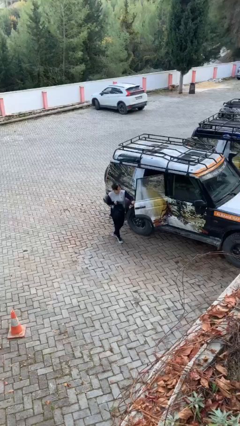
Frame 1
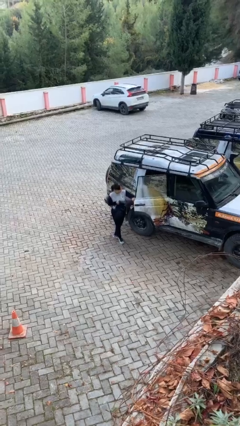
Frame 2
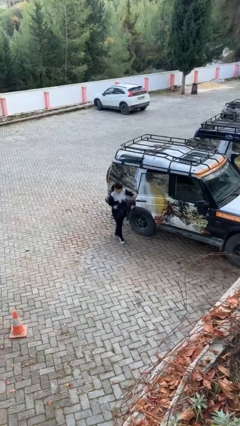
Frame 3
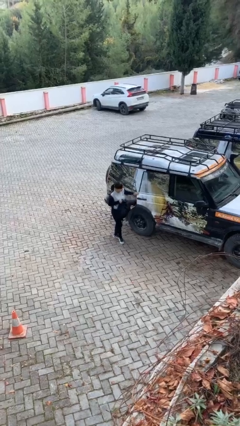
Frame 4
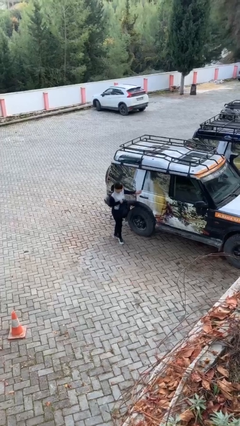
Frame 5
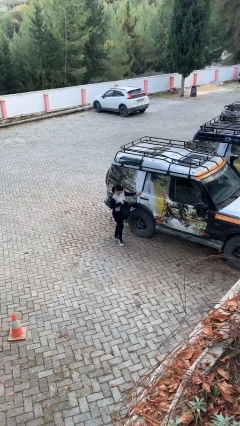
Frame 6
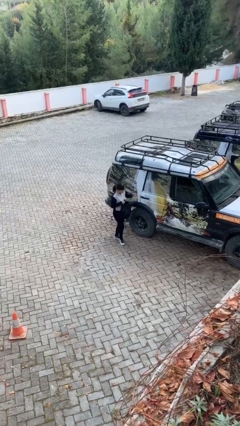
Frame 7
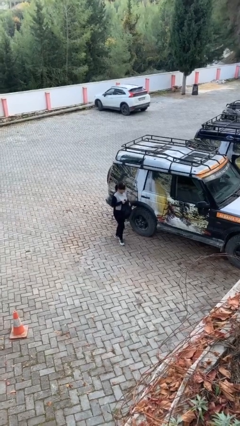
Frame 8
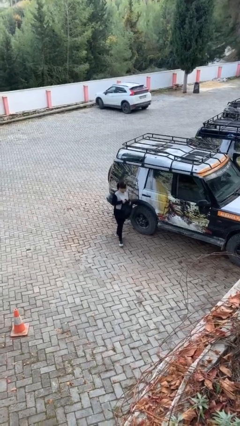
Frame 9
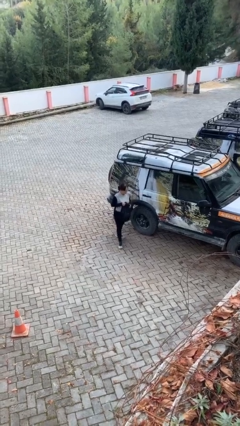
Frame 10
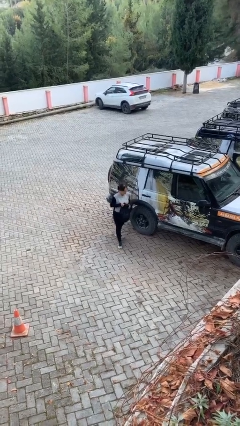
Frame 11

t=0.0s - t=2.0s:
person closes car door

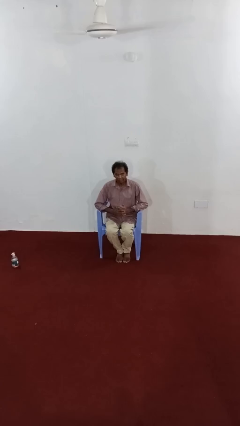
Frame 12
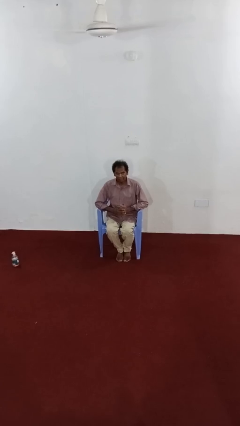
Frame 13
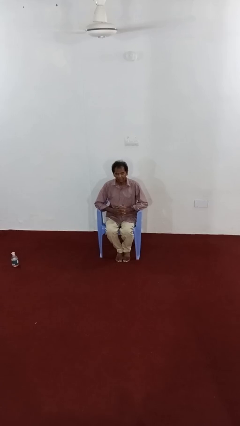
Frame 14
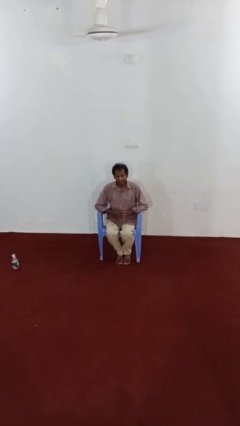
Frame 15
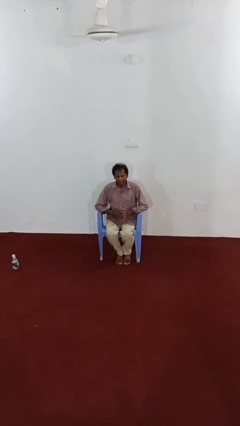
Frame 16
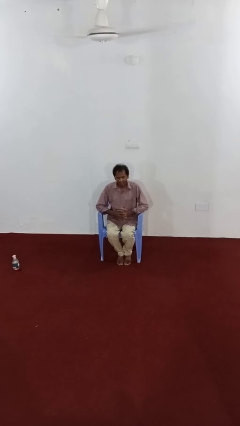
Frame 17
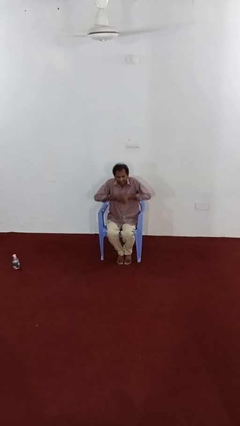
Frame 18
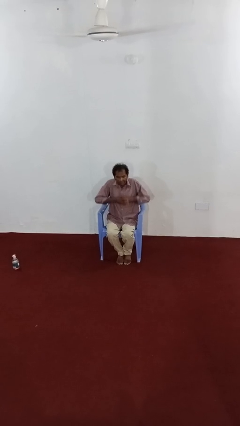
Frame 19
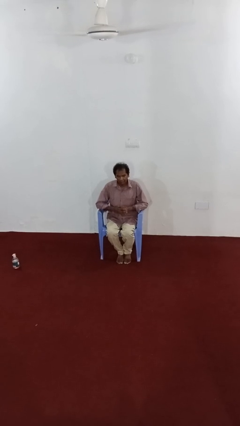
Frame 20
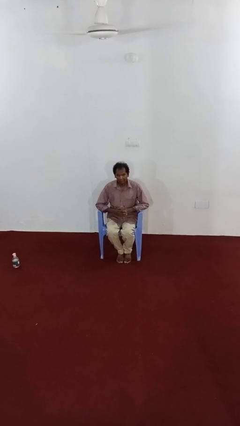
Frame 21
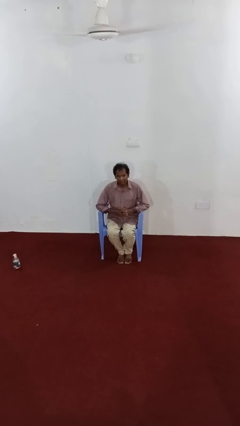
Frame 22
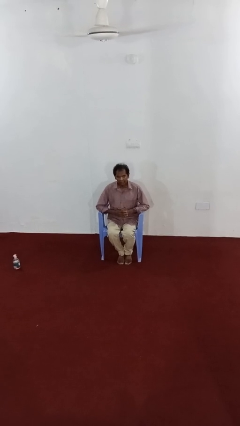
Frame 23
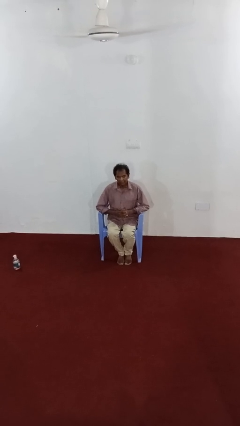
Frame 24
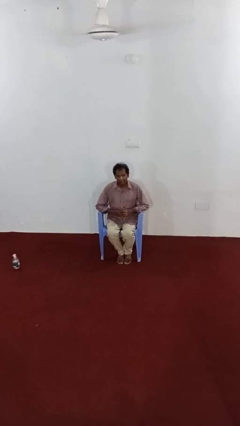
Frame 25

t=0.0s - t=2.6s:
person shrugs

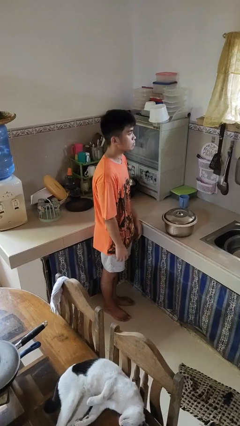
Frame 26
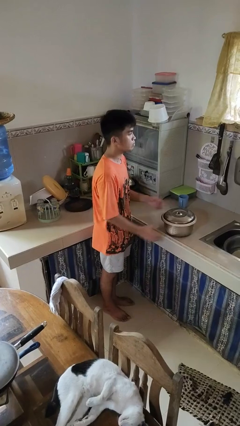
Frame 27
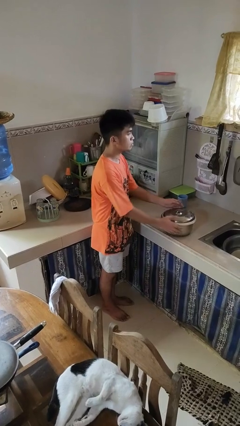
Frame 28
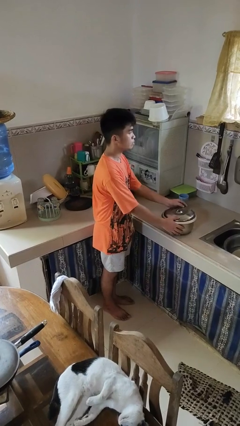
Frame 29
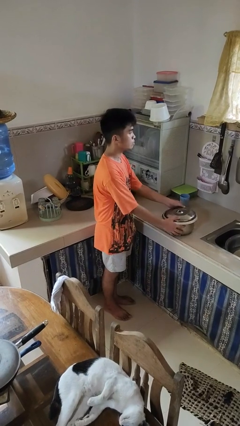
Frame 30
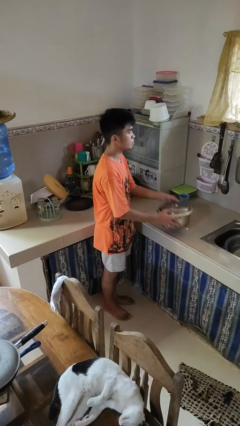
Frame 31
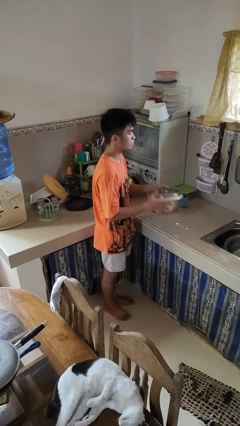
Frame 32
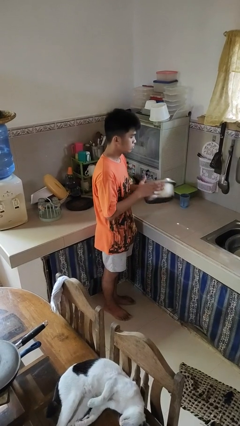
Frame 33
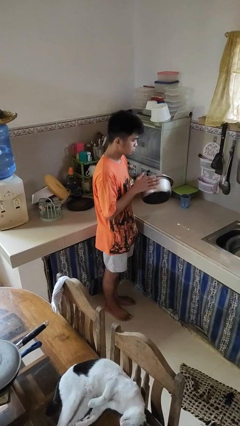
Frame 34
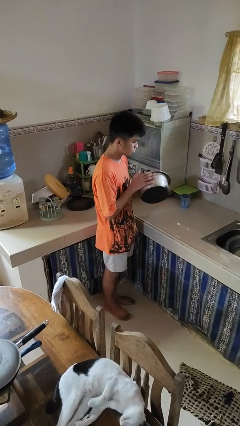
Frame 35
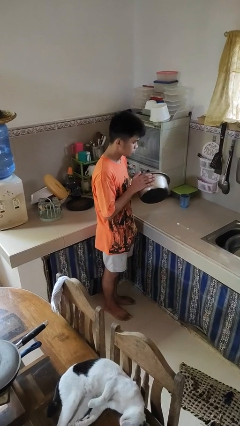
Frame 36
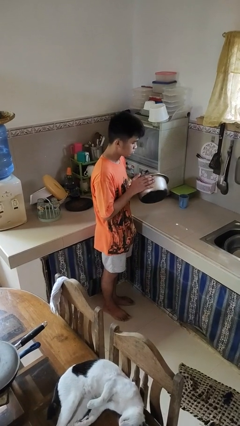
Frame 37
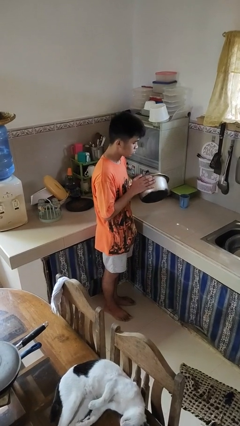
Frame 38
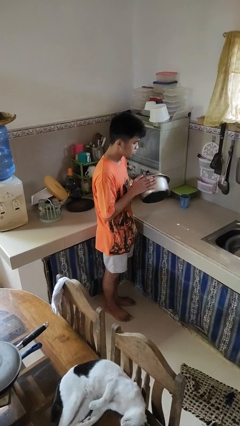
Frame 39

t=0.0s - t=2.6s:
person picks up object from countertop

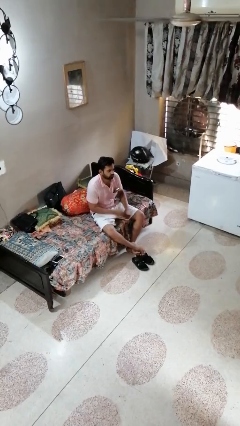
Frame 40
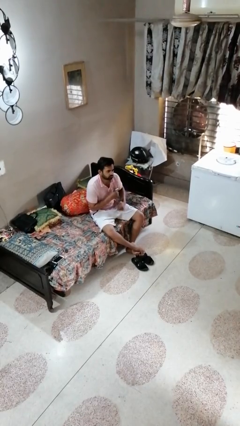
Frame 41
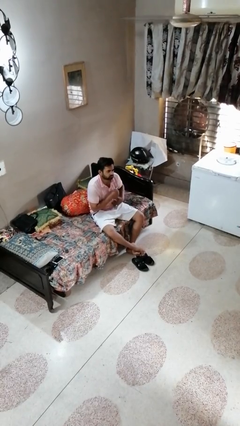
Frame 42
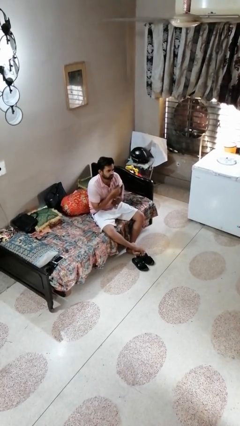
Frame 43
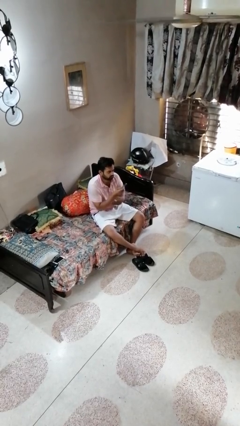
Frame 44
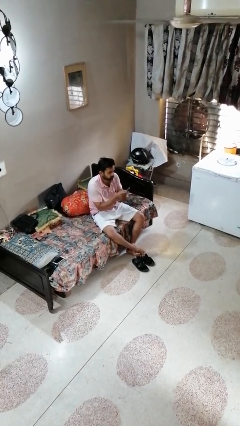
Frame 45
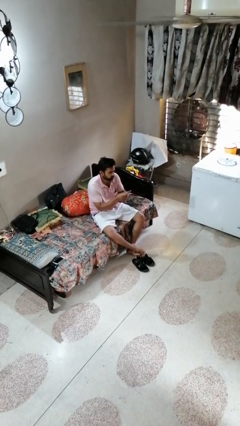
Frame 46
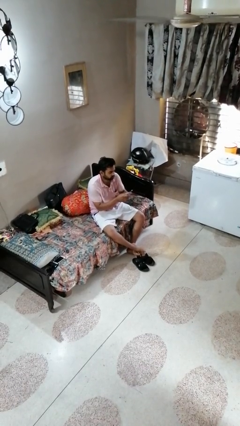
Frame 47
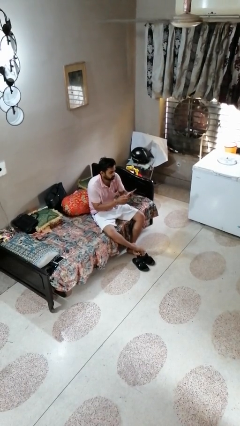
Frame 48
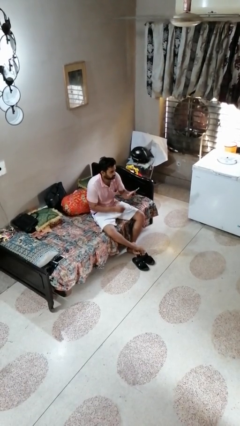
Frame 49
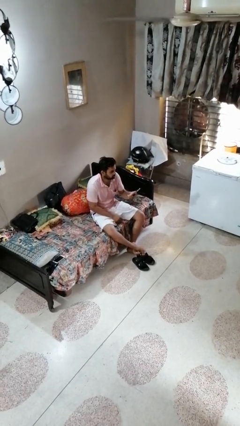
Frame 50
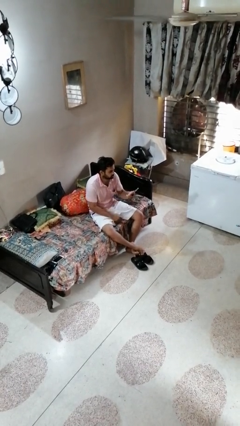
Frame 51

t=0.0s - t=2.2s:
person takes phone from pocket

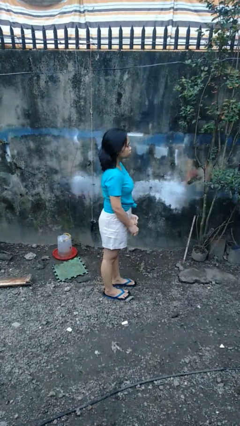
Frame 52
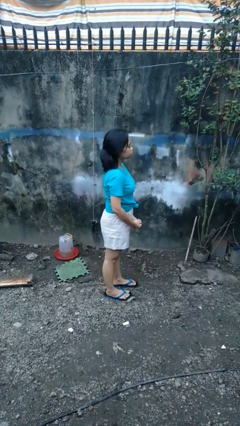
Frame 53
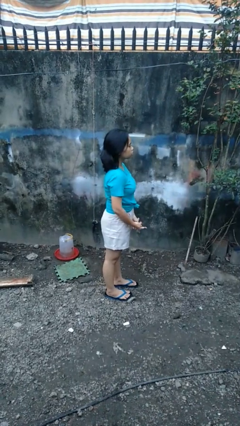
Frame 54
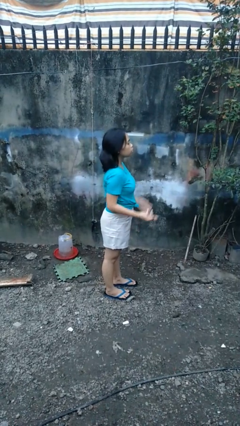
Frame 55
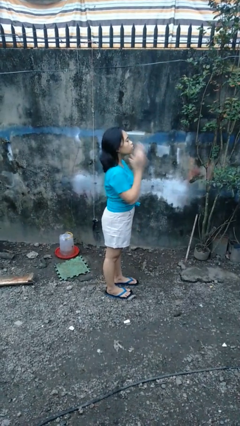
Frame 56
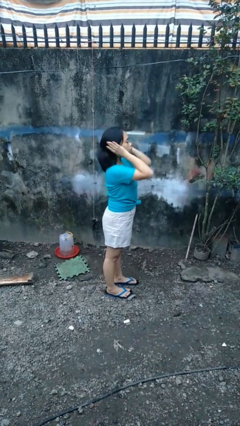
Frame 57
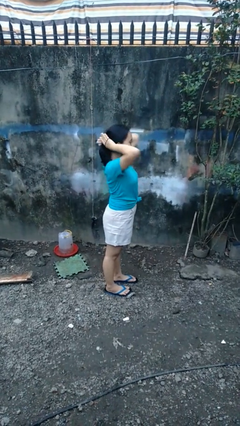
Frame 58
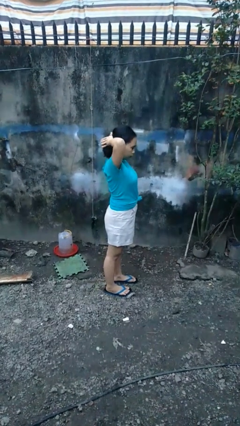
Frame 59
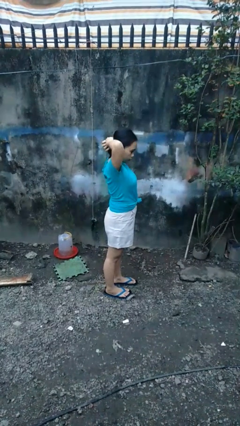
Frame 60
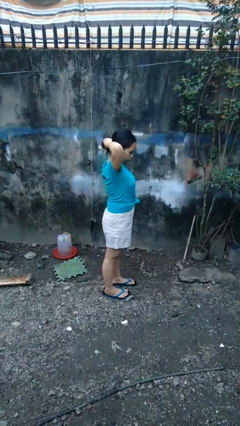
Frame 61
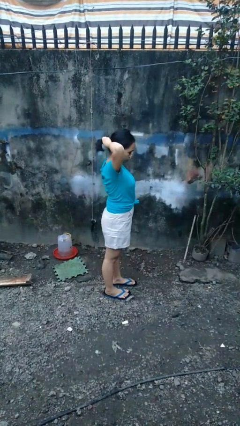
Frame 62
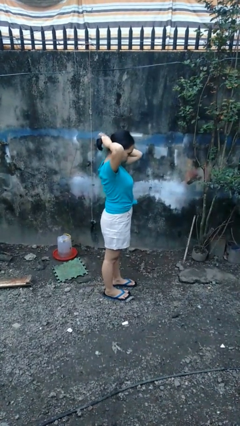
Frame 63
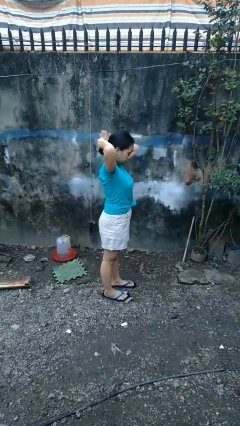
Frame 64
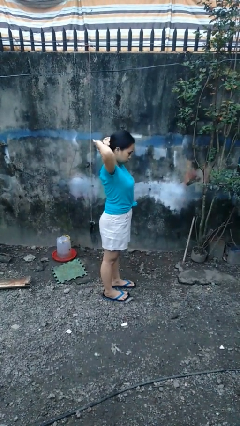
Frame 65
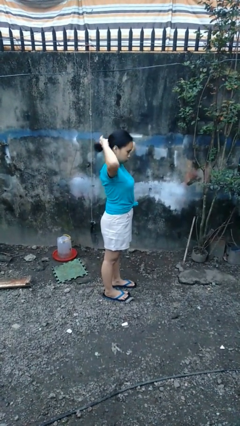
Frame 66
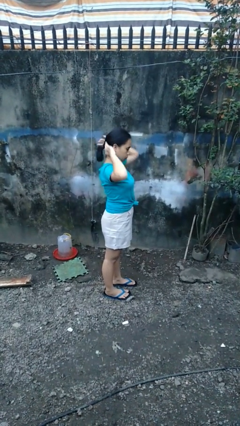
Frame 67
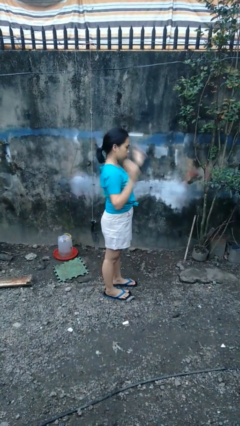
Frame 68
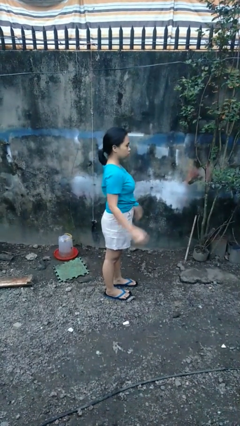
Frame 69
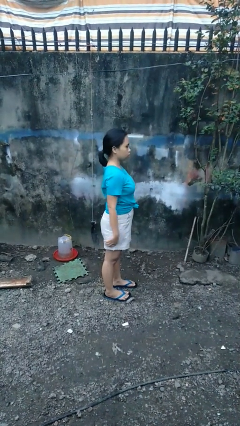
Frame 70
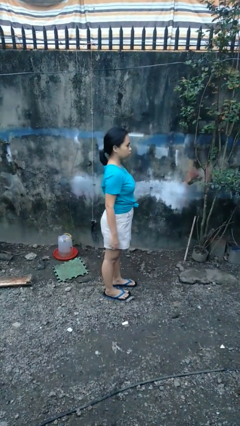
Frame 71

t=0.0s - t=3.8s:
person puts hair in ponytail

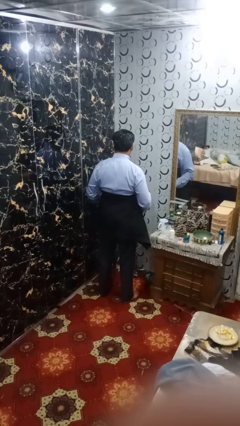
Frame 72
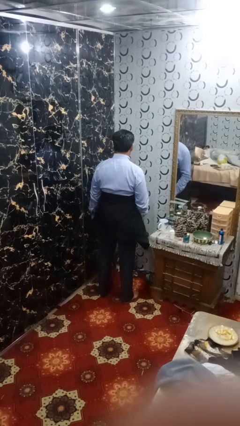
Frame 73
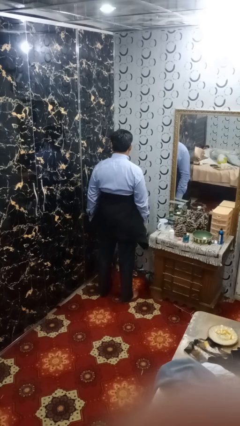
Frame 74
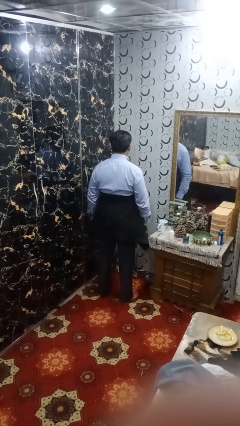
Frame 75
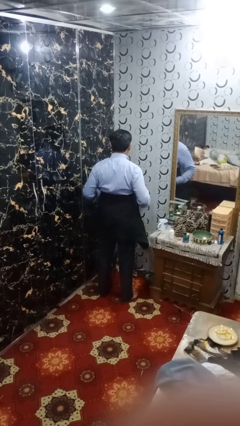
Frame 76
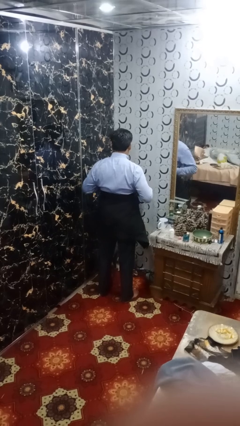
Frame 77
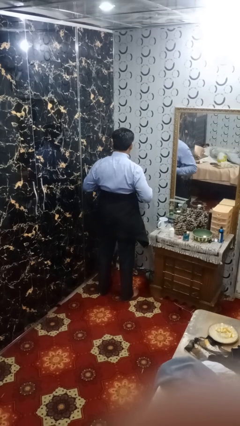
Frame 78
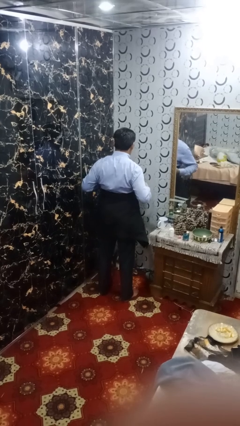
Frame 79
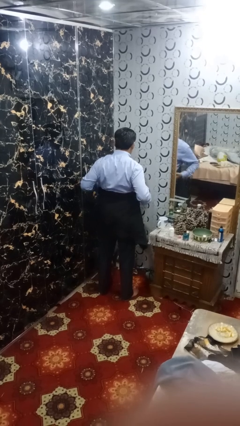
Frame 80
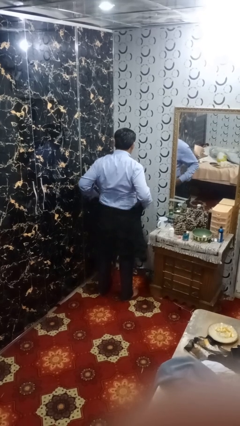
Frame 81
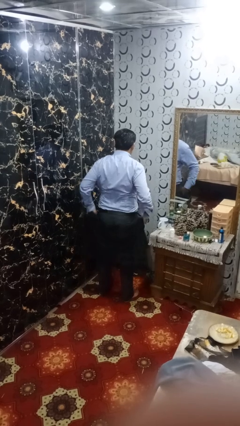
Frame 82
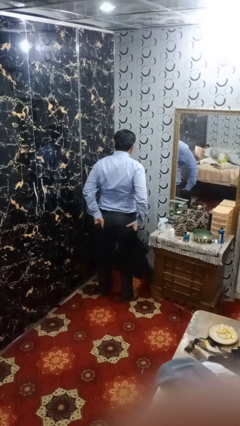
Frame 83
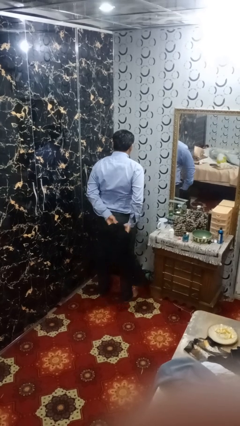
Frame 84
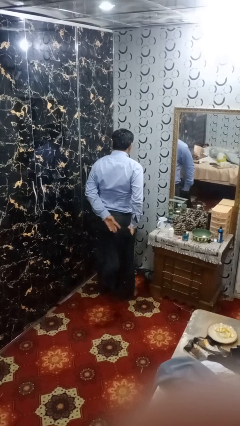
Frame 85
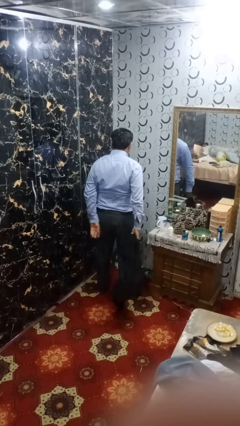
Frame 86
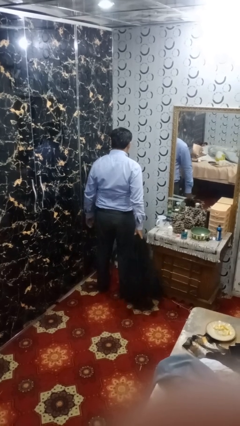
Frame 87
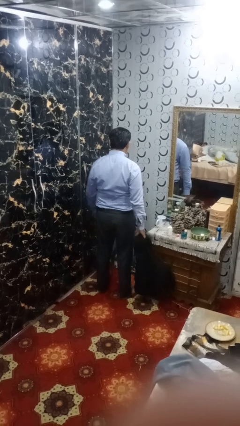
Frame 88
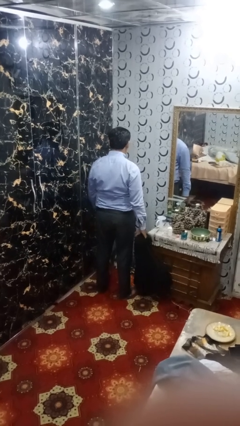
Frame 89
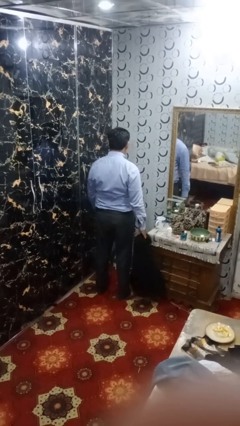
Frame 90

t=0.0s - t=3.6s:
person unties jacket around waist

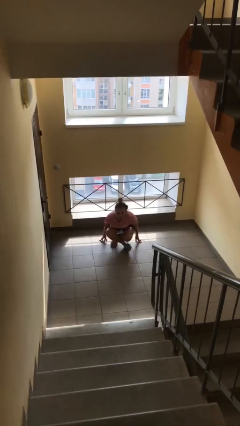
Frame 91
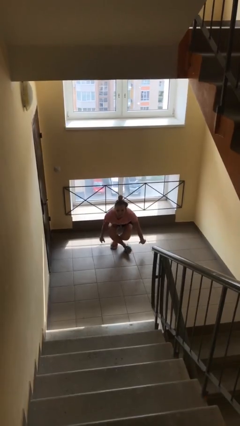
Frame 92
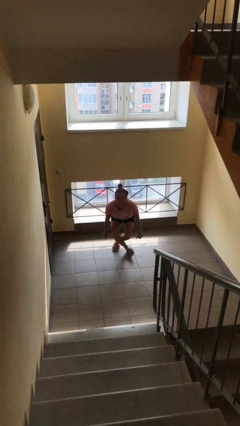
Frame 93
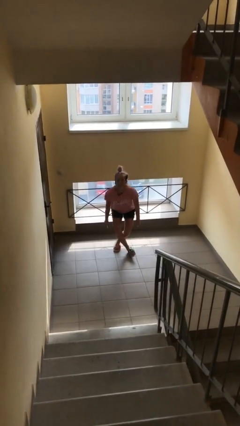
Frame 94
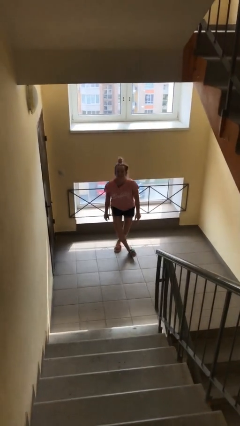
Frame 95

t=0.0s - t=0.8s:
person stands up from floor
